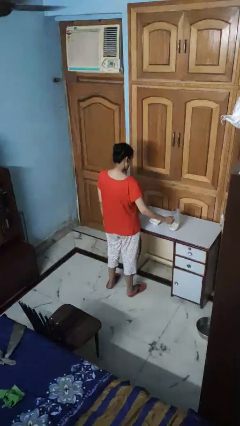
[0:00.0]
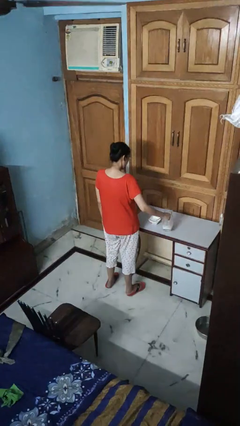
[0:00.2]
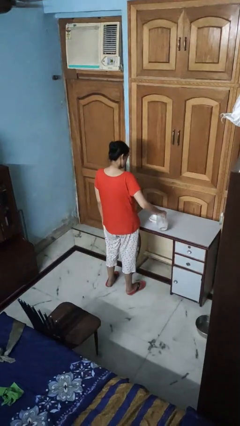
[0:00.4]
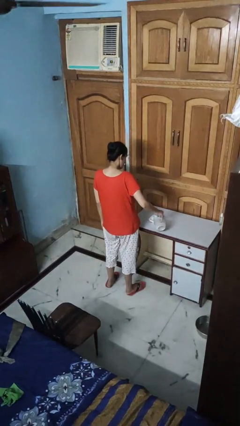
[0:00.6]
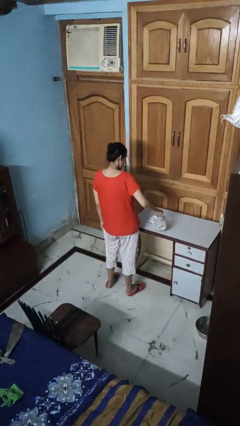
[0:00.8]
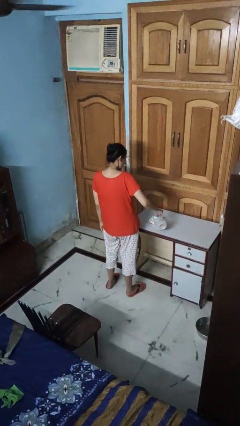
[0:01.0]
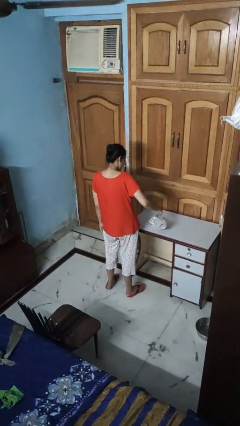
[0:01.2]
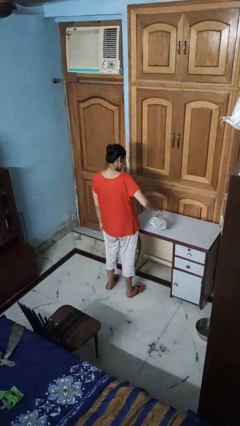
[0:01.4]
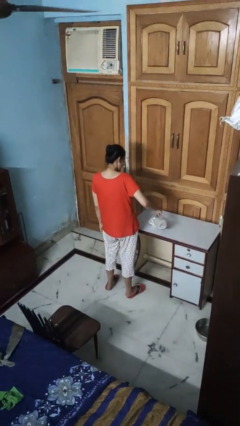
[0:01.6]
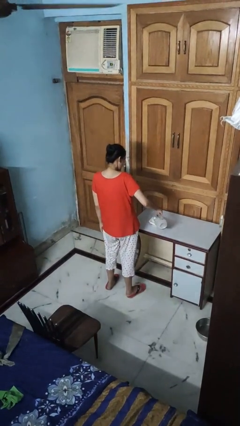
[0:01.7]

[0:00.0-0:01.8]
person pours into bowl

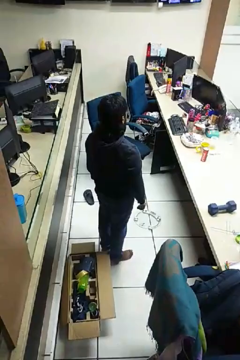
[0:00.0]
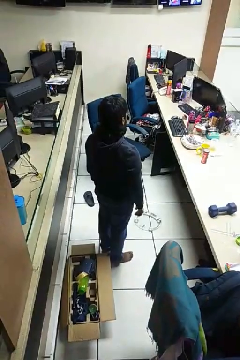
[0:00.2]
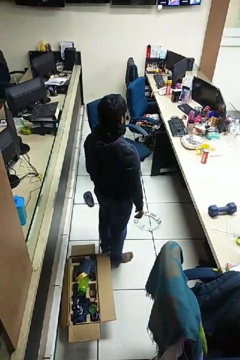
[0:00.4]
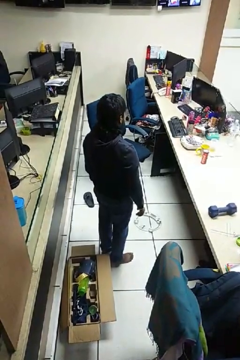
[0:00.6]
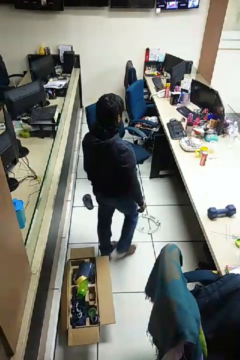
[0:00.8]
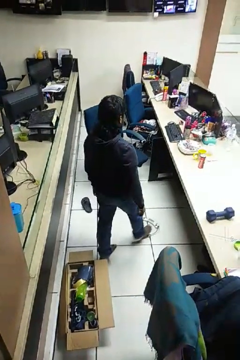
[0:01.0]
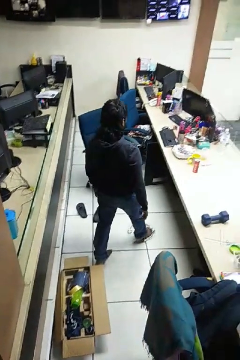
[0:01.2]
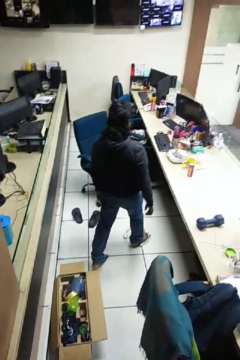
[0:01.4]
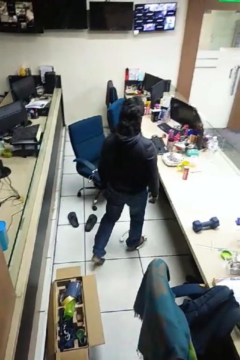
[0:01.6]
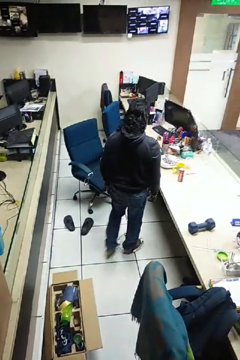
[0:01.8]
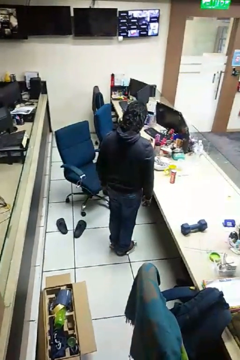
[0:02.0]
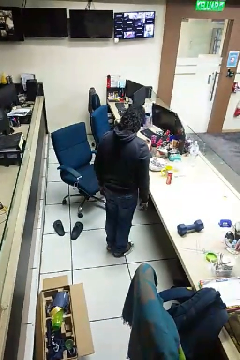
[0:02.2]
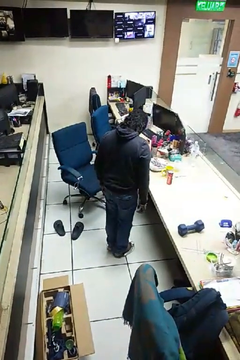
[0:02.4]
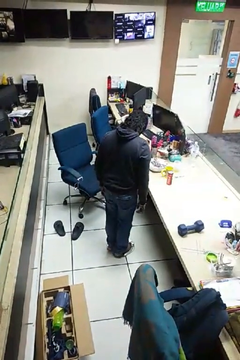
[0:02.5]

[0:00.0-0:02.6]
person uses bodyweight scale

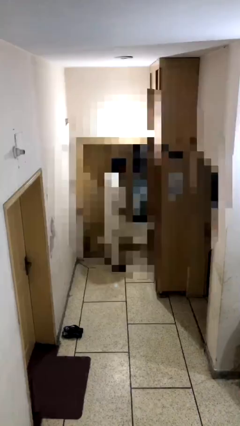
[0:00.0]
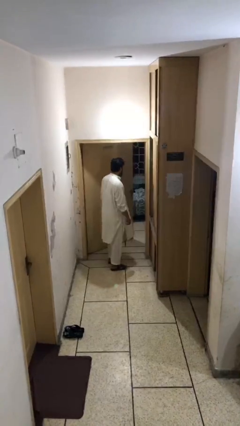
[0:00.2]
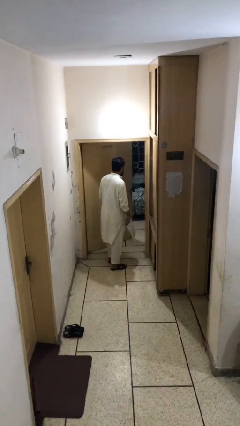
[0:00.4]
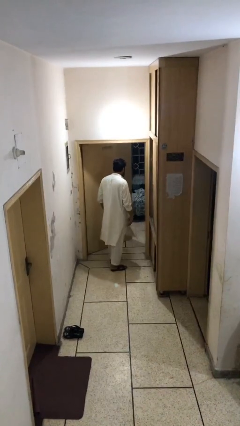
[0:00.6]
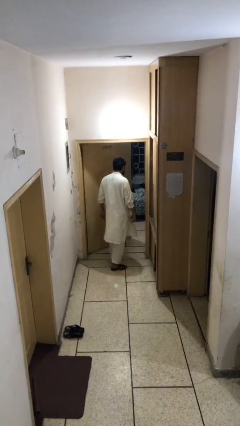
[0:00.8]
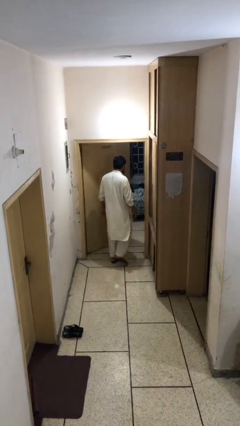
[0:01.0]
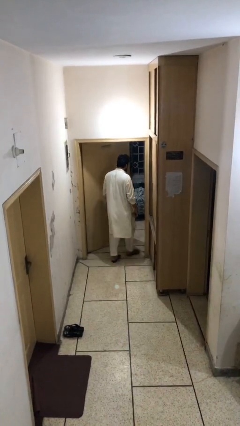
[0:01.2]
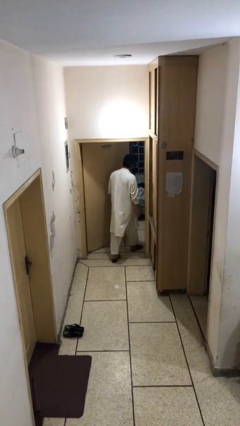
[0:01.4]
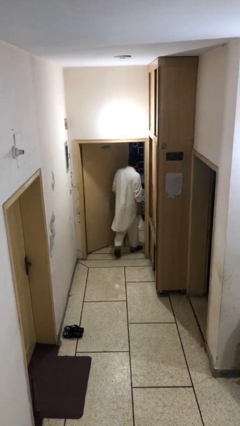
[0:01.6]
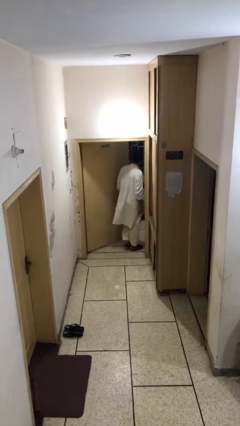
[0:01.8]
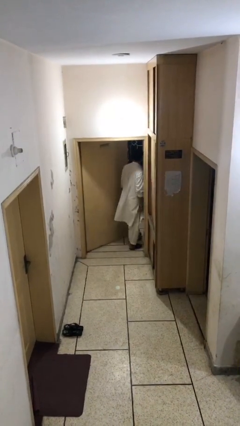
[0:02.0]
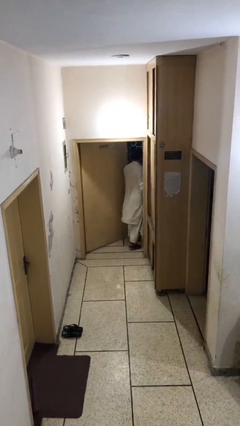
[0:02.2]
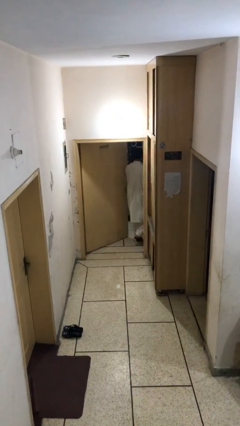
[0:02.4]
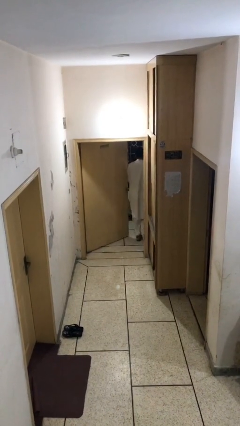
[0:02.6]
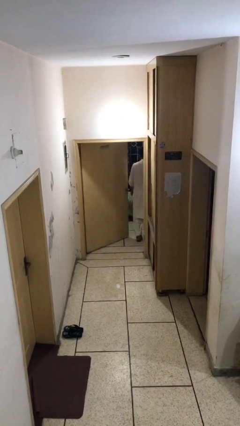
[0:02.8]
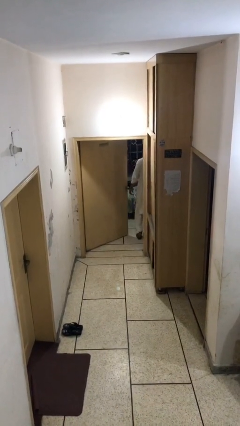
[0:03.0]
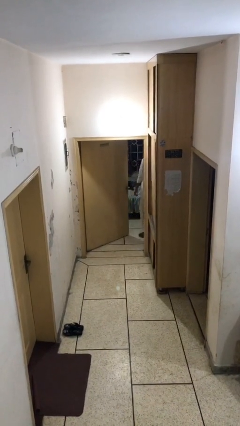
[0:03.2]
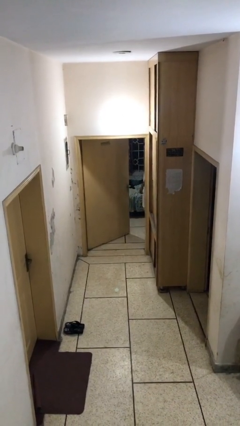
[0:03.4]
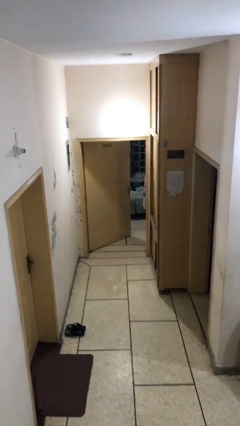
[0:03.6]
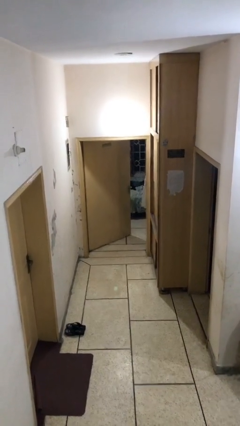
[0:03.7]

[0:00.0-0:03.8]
person exits scene through structure

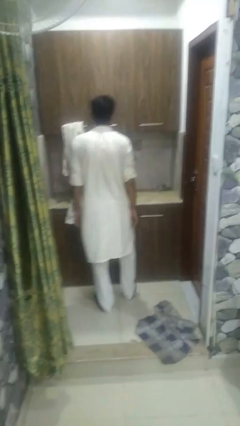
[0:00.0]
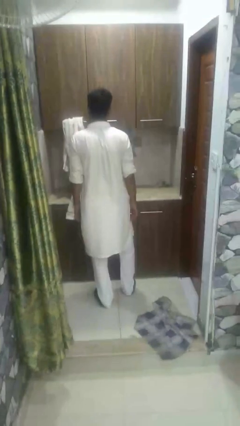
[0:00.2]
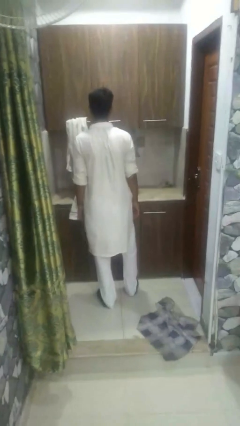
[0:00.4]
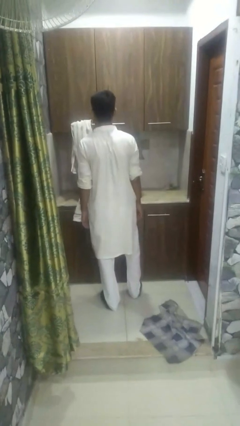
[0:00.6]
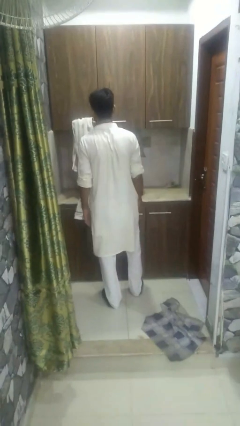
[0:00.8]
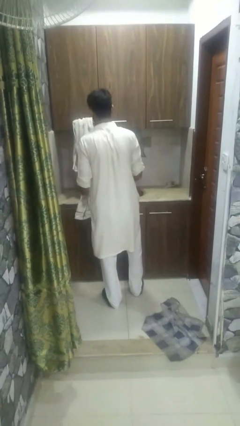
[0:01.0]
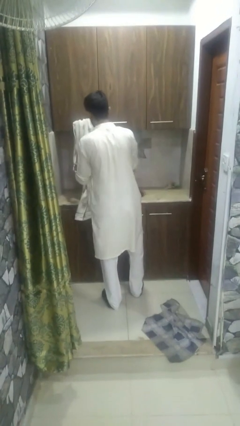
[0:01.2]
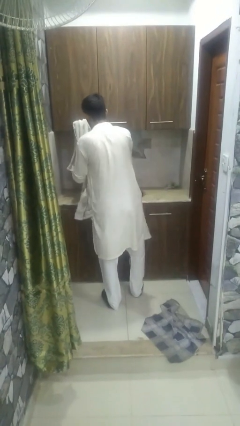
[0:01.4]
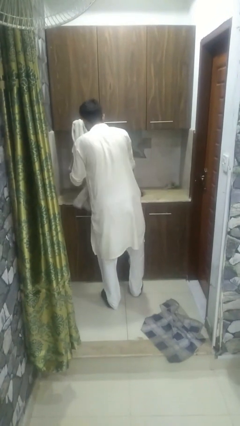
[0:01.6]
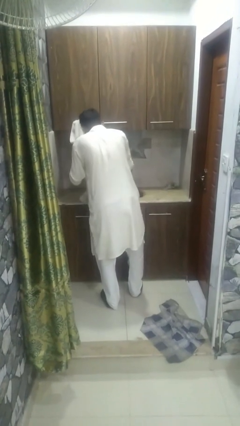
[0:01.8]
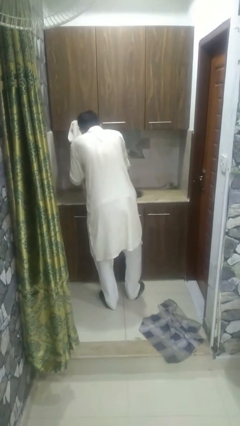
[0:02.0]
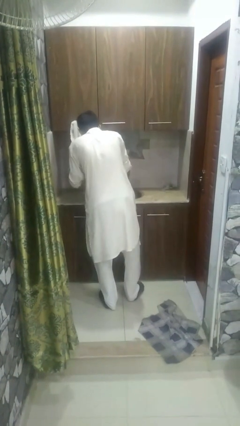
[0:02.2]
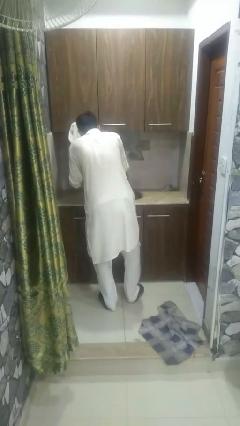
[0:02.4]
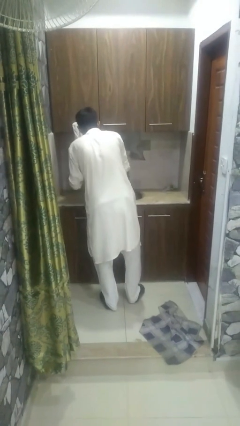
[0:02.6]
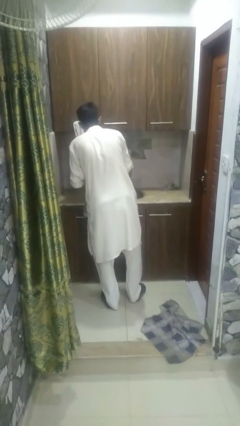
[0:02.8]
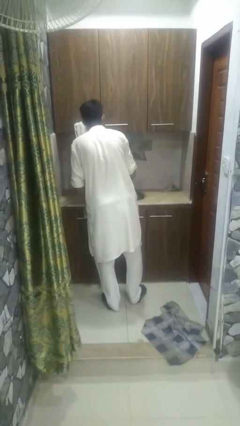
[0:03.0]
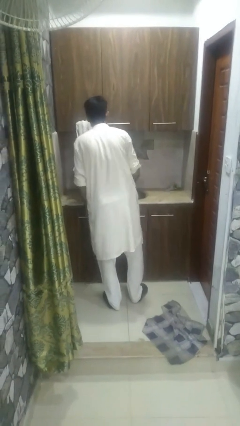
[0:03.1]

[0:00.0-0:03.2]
person dries face with towel

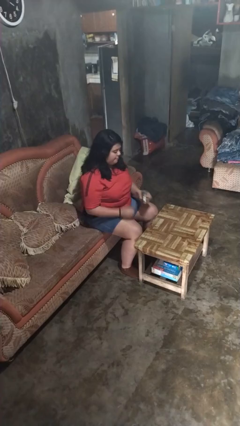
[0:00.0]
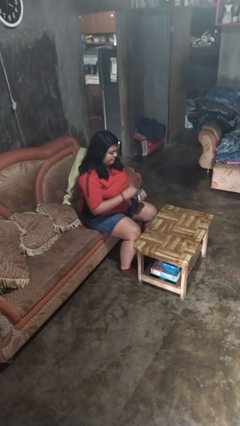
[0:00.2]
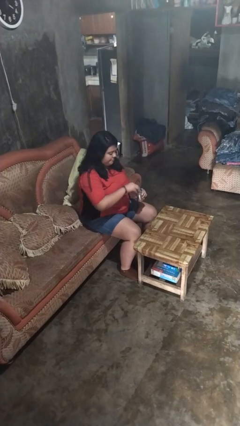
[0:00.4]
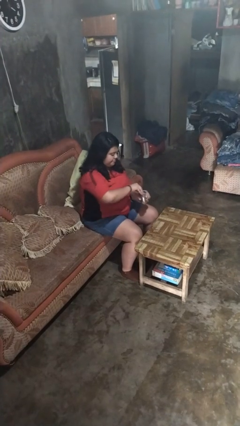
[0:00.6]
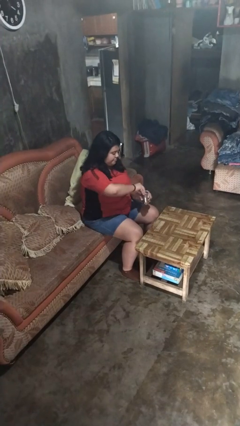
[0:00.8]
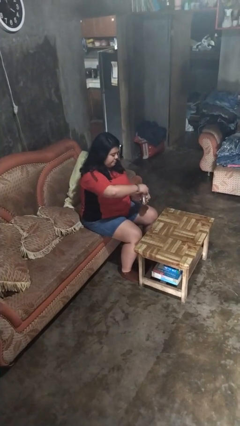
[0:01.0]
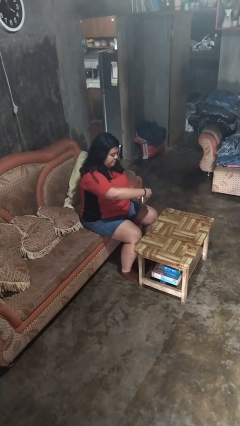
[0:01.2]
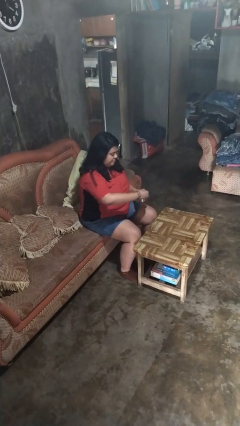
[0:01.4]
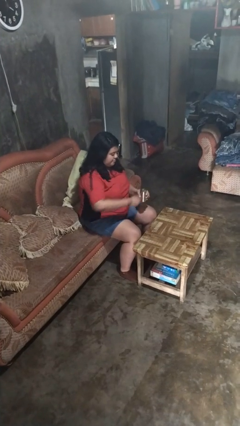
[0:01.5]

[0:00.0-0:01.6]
person opens beverage can

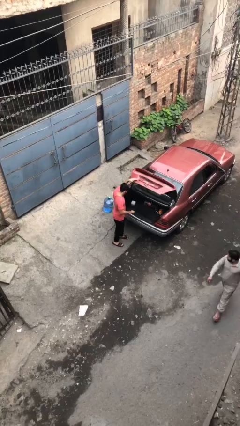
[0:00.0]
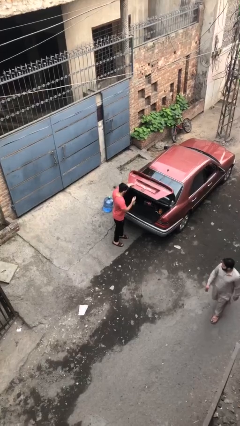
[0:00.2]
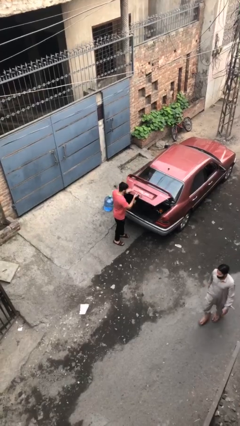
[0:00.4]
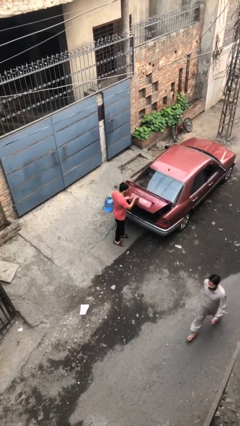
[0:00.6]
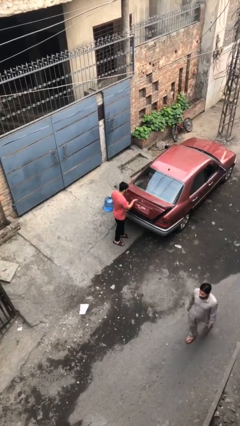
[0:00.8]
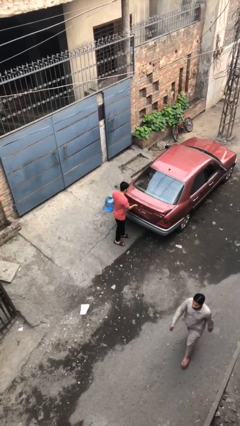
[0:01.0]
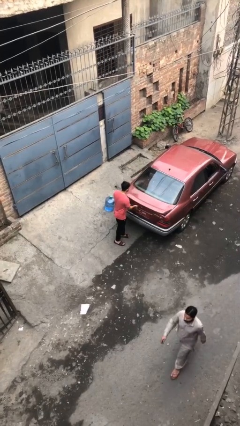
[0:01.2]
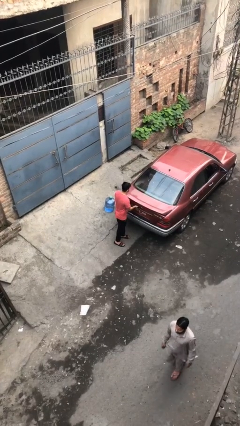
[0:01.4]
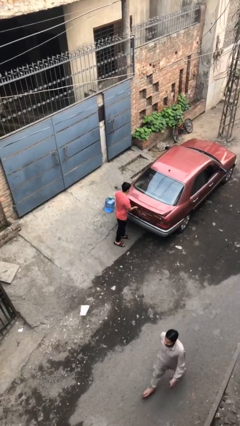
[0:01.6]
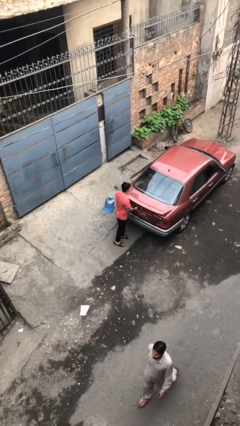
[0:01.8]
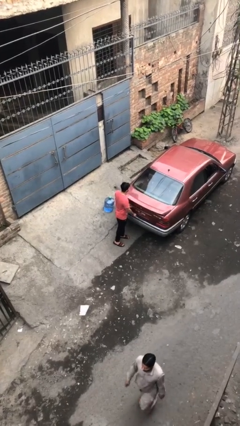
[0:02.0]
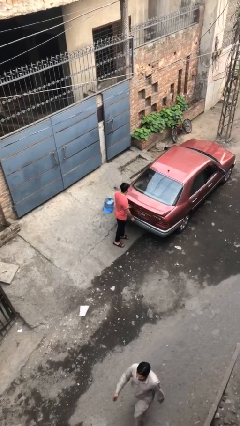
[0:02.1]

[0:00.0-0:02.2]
person closes car trunk

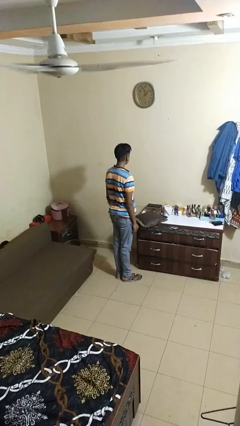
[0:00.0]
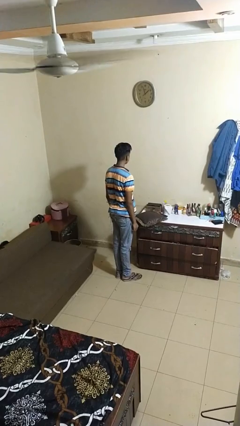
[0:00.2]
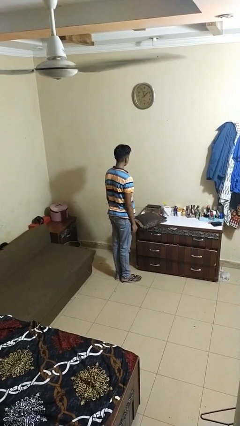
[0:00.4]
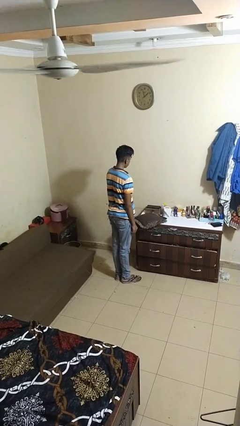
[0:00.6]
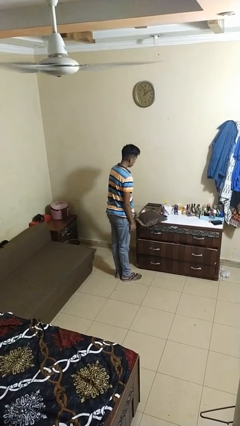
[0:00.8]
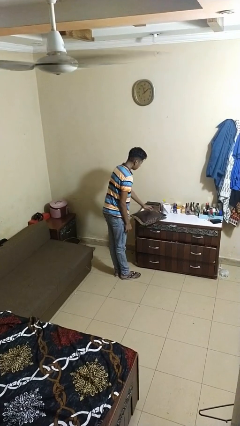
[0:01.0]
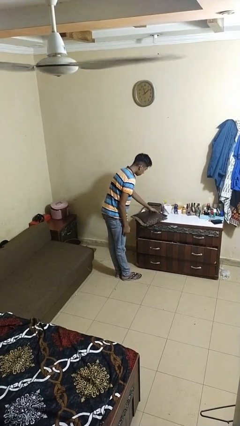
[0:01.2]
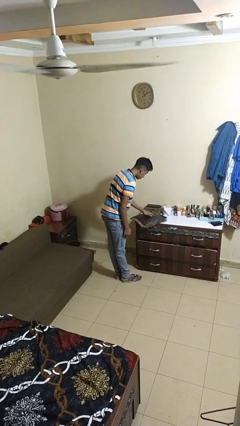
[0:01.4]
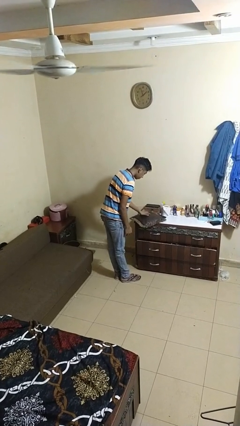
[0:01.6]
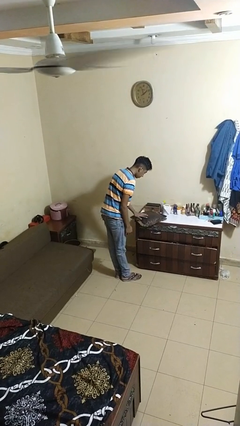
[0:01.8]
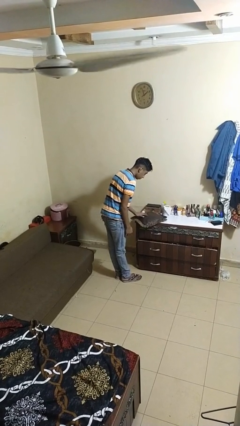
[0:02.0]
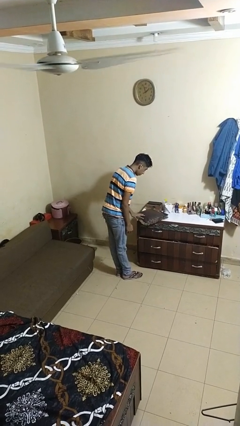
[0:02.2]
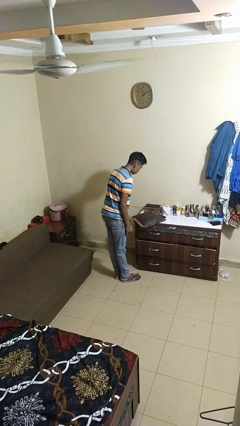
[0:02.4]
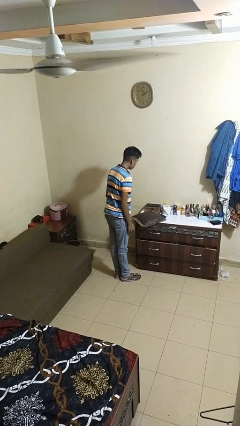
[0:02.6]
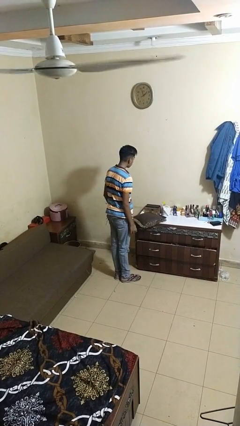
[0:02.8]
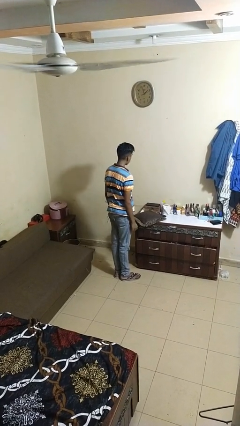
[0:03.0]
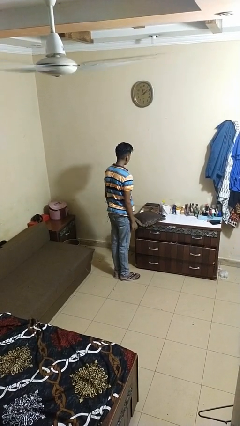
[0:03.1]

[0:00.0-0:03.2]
person waves hand over object
